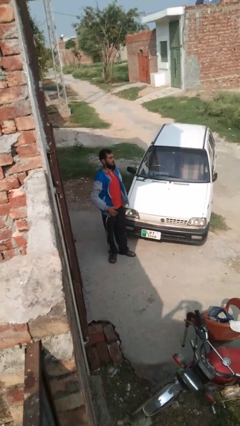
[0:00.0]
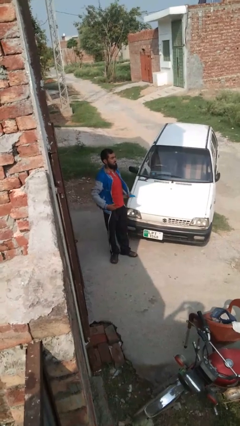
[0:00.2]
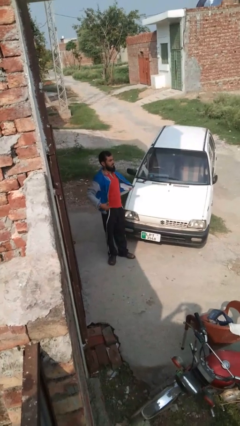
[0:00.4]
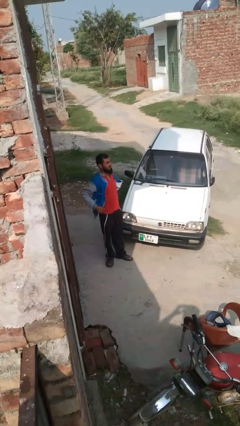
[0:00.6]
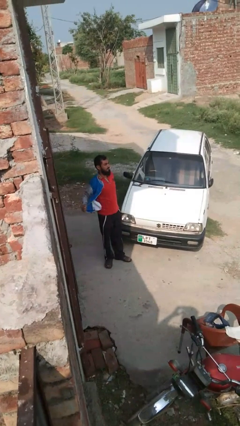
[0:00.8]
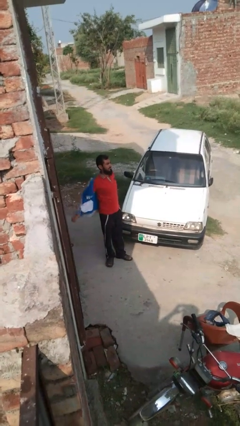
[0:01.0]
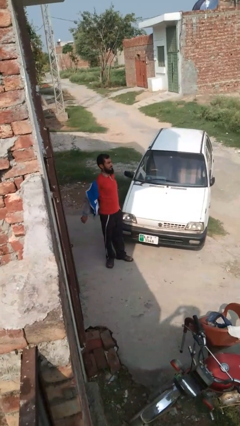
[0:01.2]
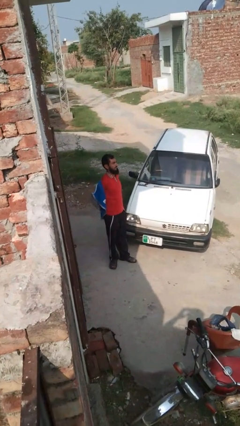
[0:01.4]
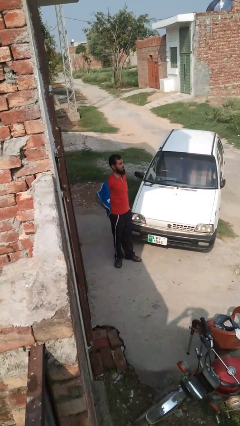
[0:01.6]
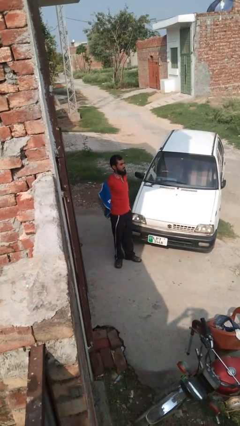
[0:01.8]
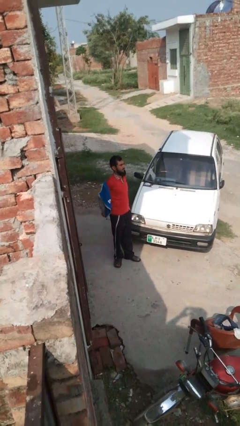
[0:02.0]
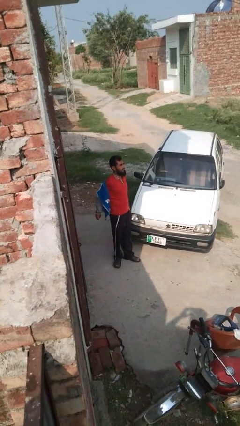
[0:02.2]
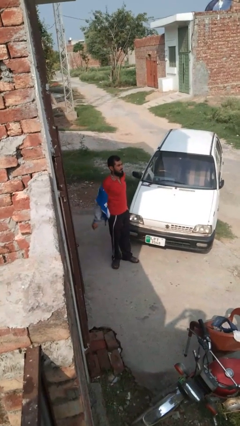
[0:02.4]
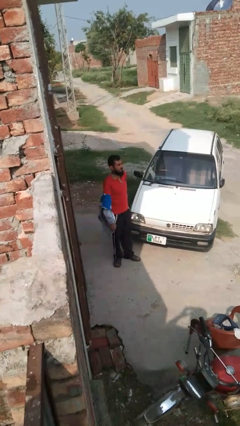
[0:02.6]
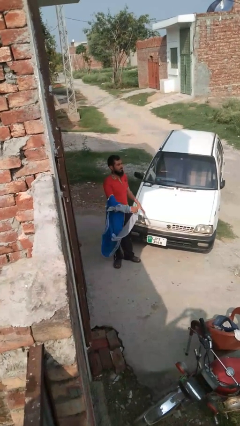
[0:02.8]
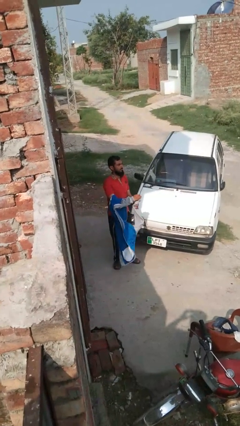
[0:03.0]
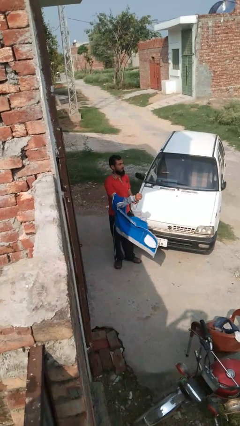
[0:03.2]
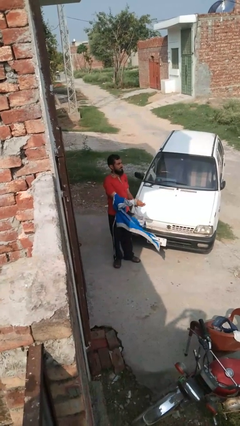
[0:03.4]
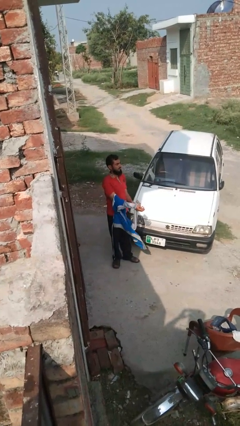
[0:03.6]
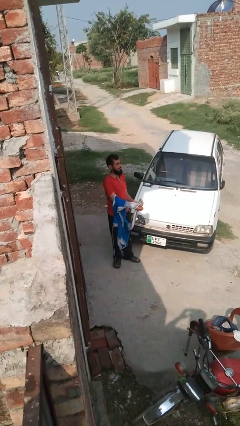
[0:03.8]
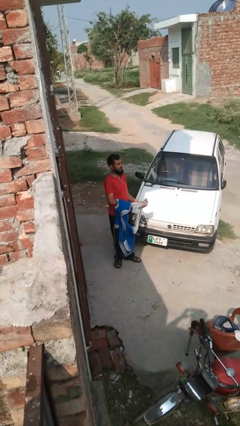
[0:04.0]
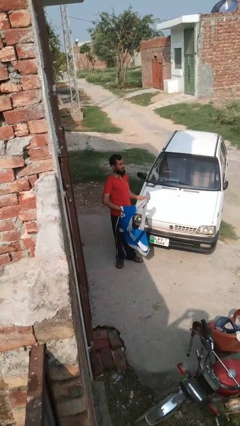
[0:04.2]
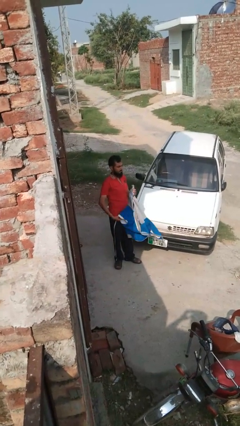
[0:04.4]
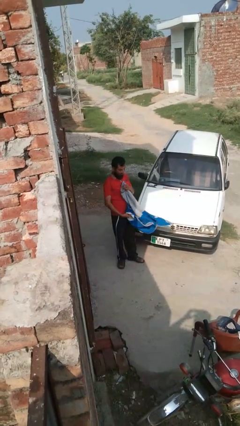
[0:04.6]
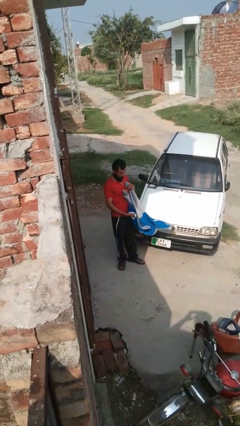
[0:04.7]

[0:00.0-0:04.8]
person takes off jacket

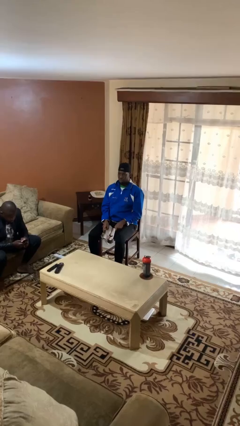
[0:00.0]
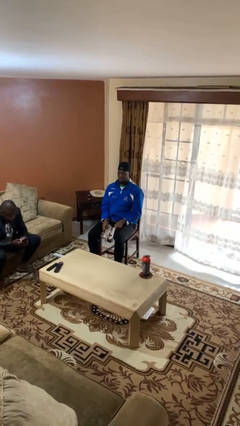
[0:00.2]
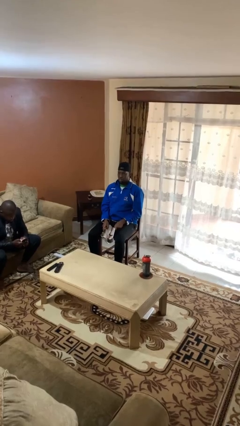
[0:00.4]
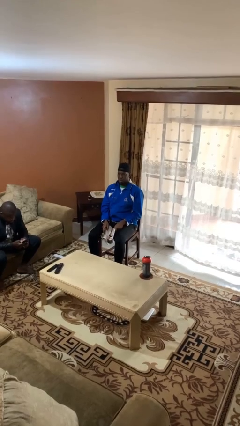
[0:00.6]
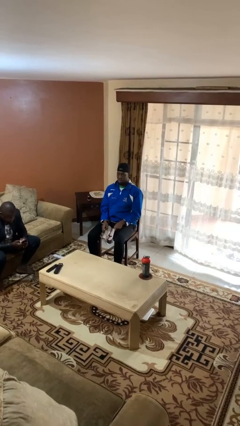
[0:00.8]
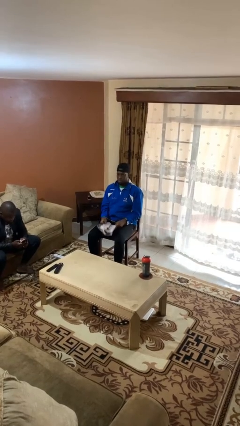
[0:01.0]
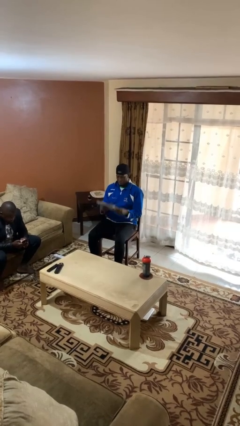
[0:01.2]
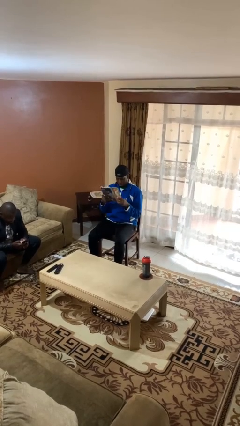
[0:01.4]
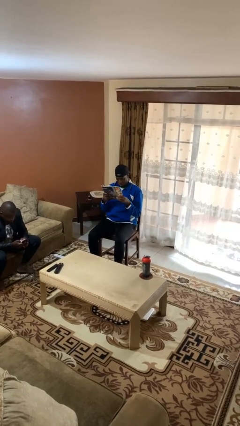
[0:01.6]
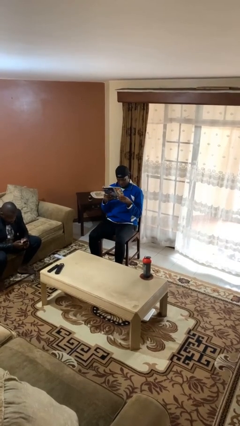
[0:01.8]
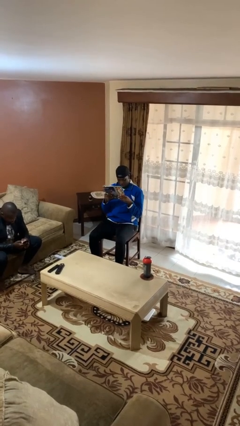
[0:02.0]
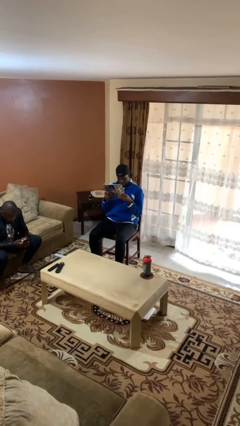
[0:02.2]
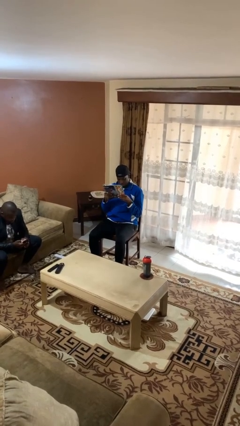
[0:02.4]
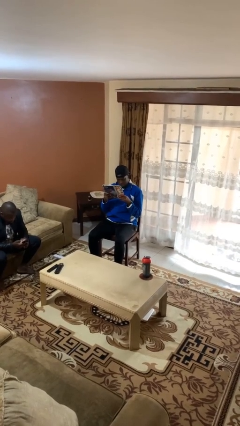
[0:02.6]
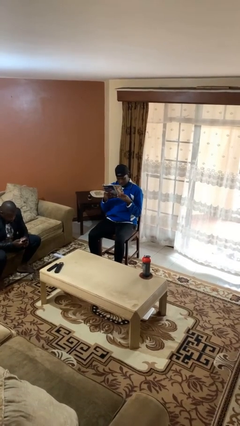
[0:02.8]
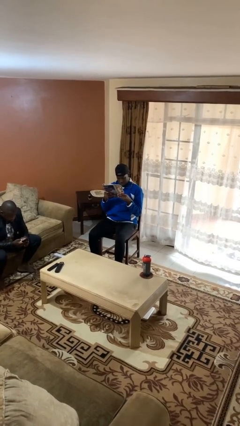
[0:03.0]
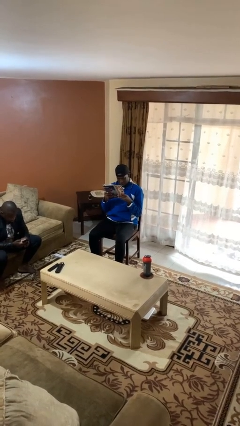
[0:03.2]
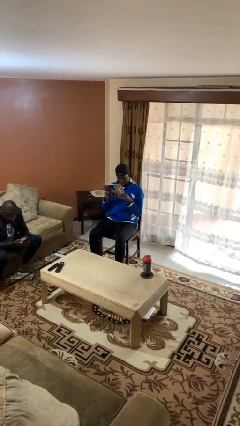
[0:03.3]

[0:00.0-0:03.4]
person reads document

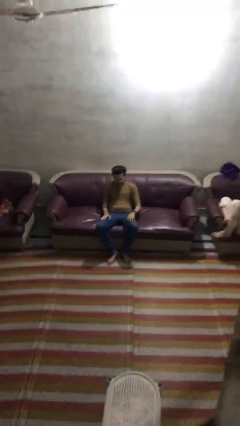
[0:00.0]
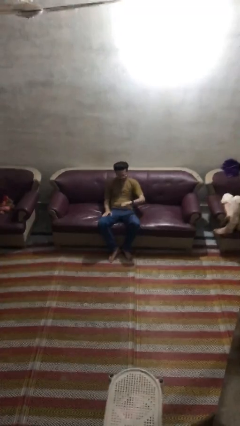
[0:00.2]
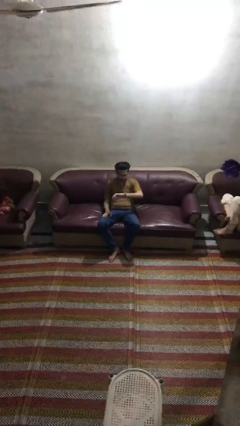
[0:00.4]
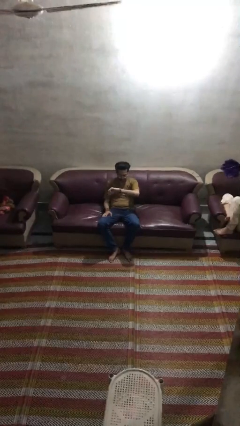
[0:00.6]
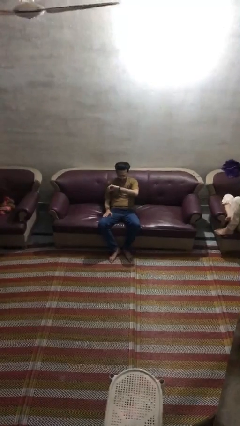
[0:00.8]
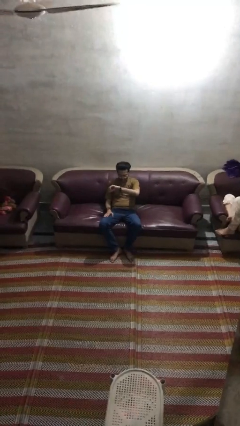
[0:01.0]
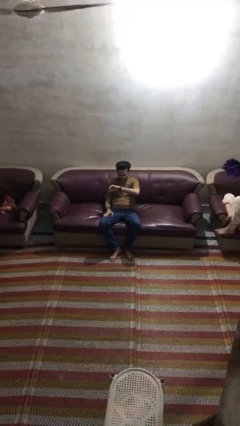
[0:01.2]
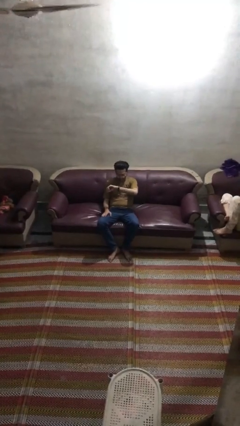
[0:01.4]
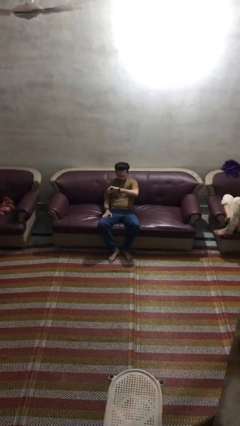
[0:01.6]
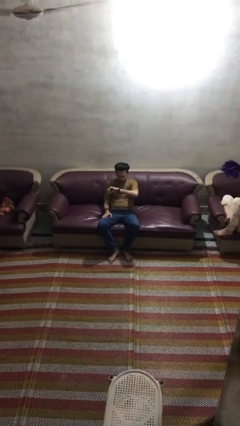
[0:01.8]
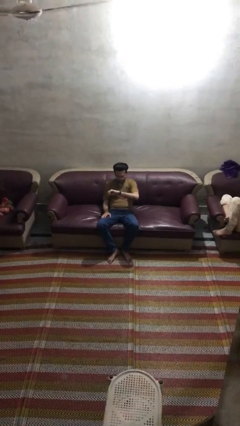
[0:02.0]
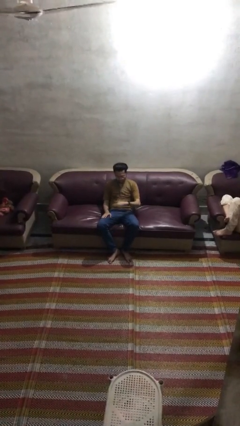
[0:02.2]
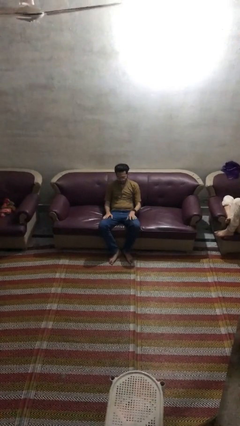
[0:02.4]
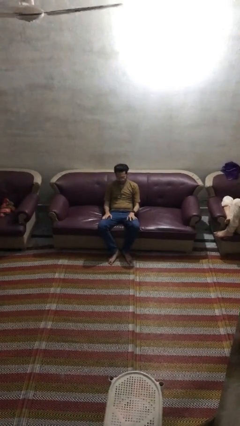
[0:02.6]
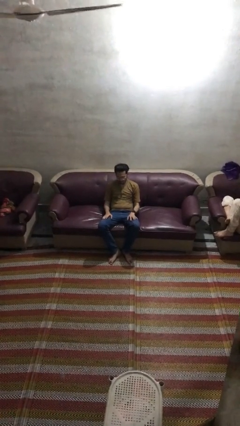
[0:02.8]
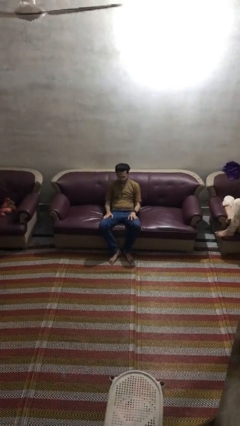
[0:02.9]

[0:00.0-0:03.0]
person looks at wristwatch

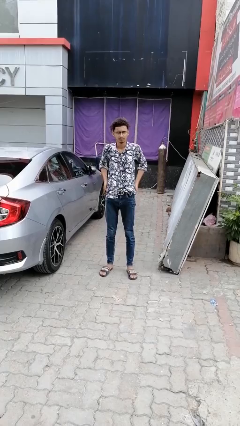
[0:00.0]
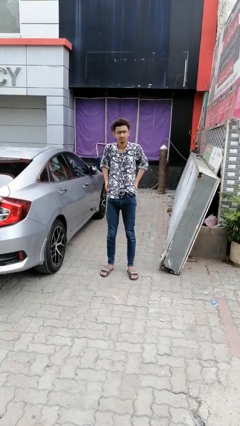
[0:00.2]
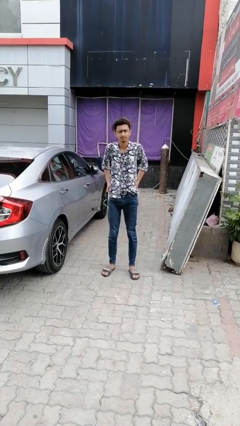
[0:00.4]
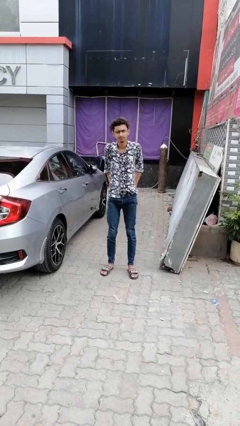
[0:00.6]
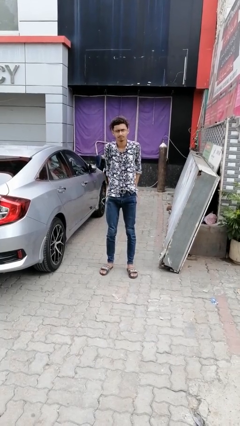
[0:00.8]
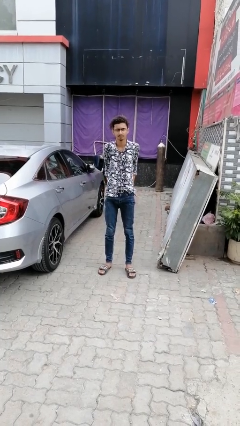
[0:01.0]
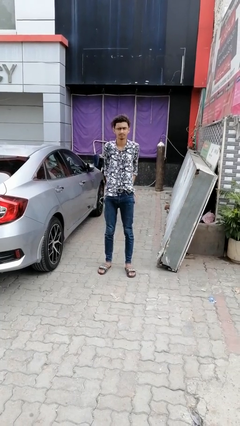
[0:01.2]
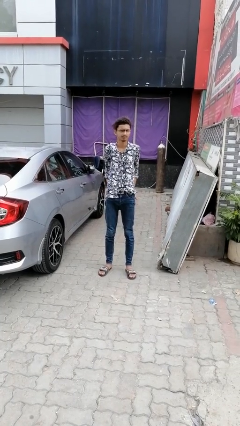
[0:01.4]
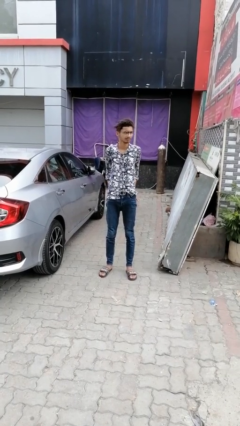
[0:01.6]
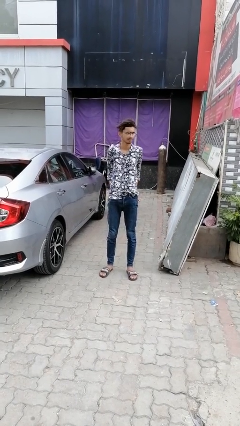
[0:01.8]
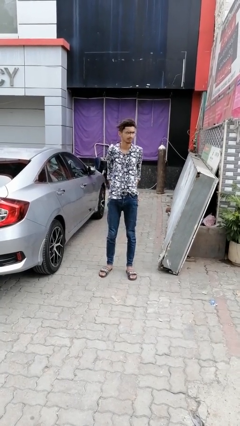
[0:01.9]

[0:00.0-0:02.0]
person puts hands in back pockets

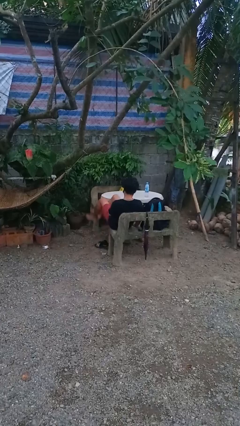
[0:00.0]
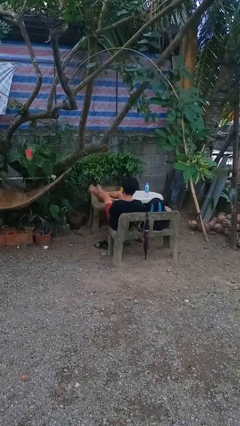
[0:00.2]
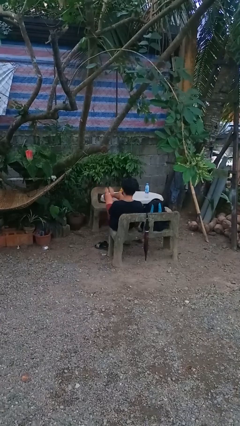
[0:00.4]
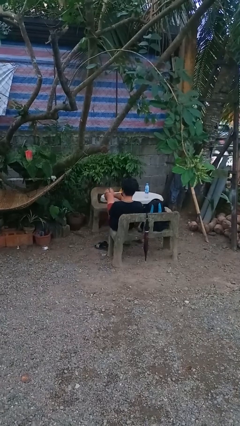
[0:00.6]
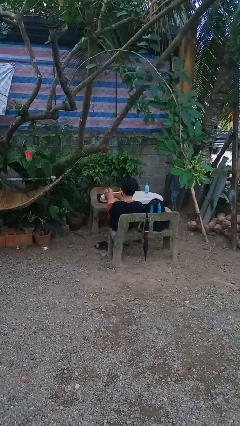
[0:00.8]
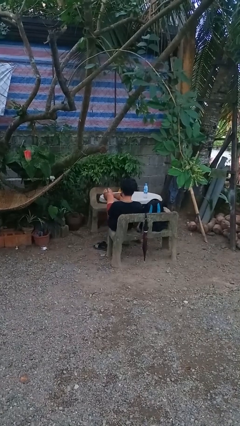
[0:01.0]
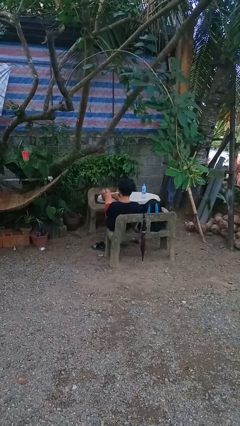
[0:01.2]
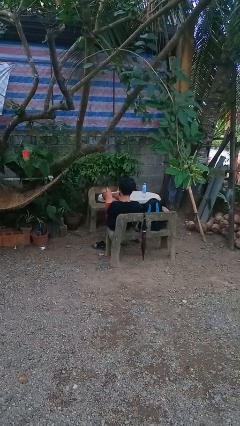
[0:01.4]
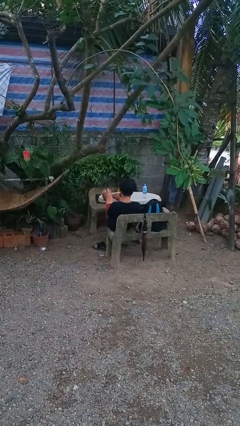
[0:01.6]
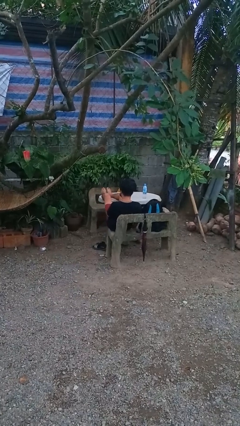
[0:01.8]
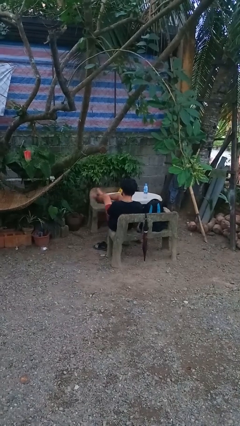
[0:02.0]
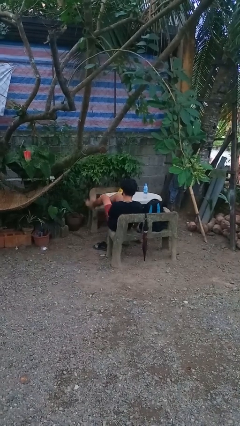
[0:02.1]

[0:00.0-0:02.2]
person puts feet up

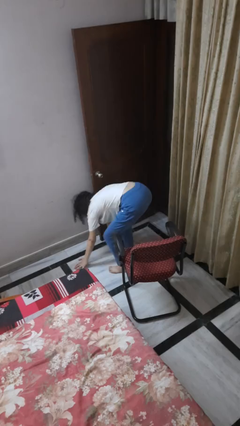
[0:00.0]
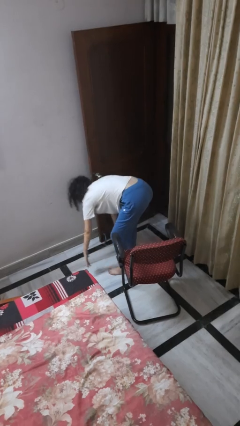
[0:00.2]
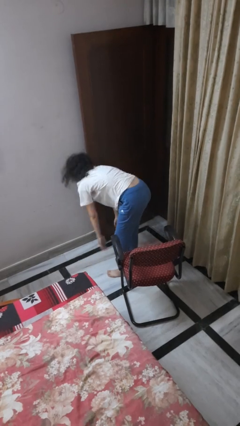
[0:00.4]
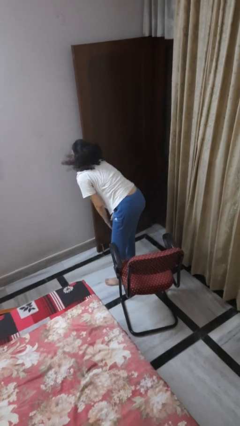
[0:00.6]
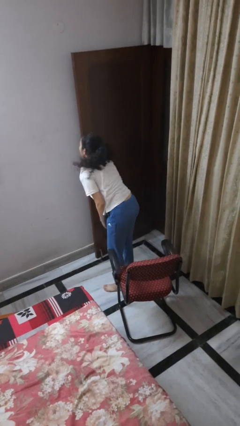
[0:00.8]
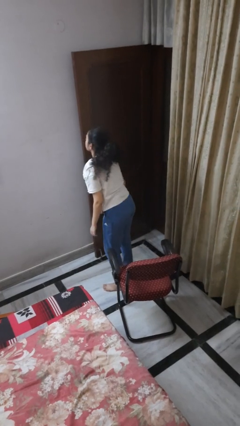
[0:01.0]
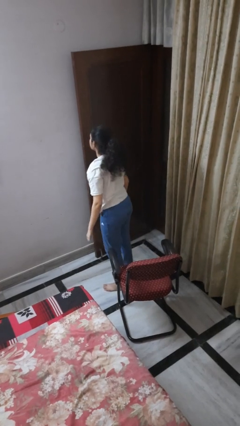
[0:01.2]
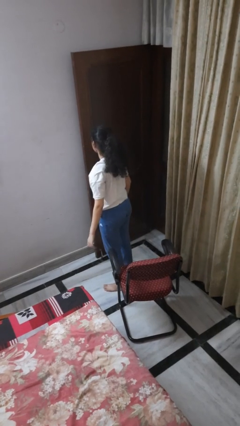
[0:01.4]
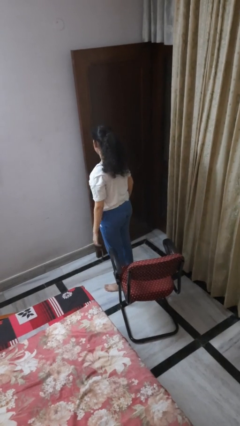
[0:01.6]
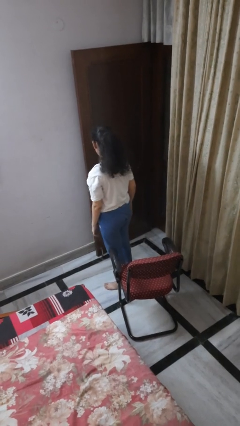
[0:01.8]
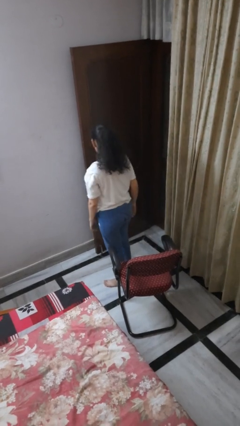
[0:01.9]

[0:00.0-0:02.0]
person stands up from floor
